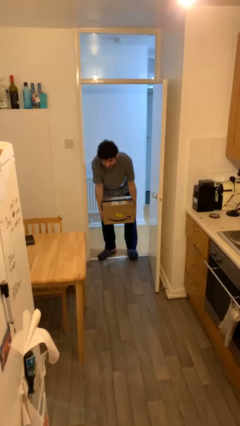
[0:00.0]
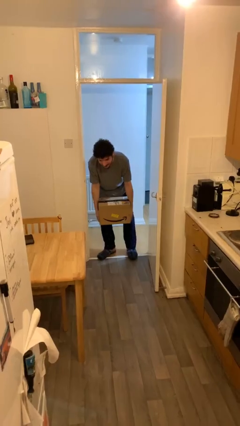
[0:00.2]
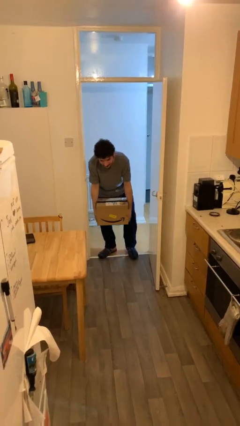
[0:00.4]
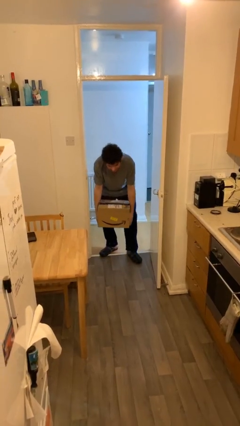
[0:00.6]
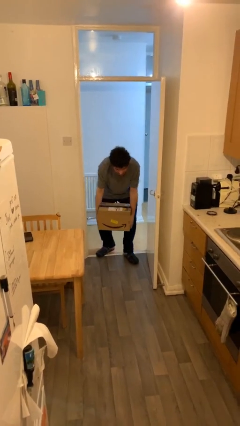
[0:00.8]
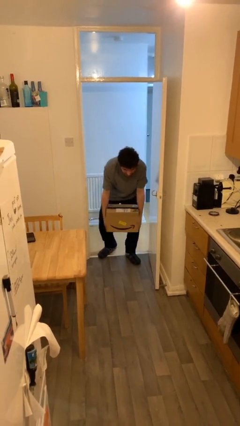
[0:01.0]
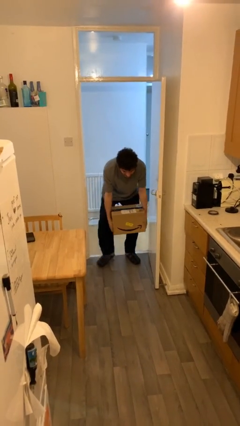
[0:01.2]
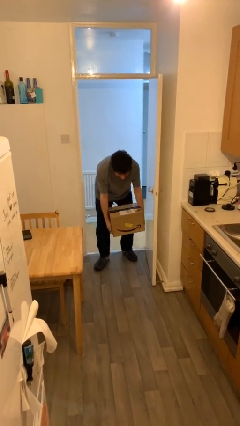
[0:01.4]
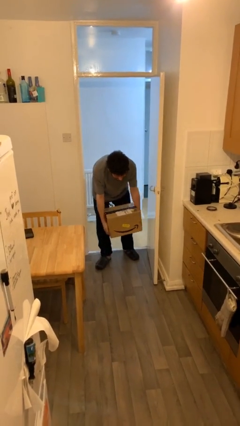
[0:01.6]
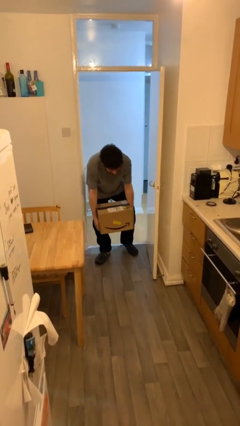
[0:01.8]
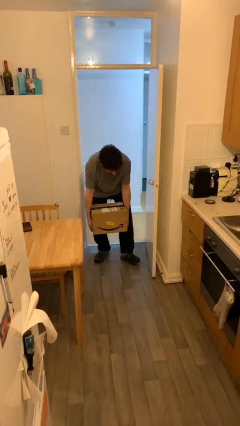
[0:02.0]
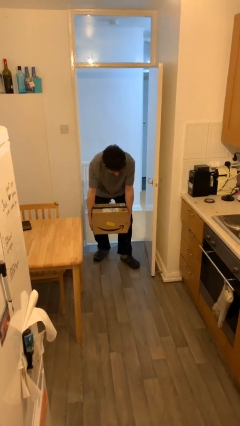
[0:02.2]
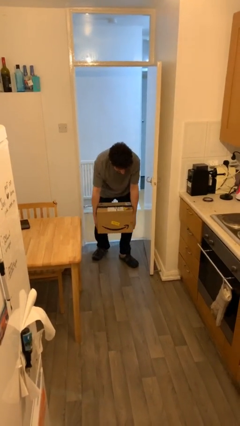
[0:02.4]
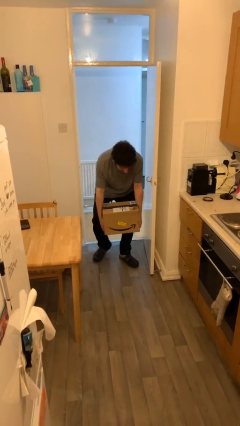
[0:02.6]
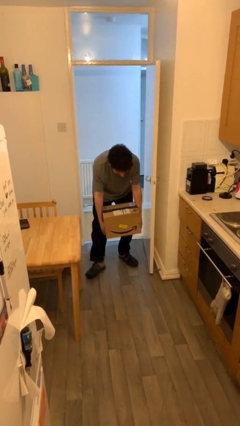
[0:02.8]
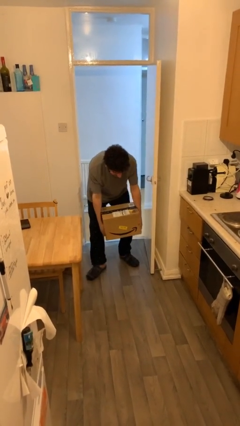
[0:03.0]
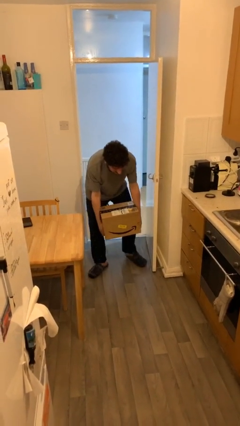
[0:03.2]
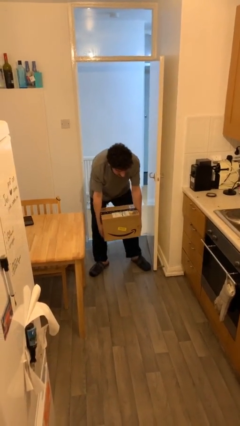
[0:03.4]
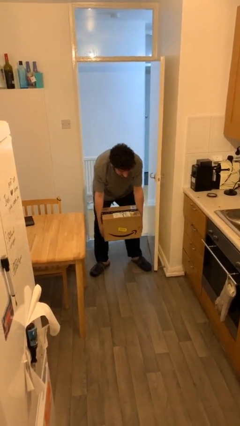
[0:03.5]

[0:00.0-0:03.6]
person carries heavy object

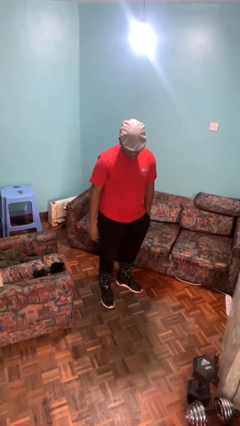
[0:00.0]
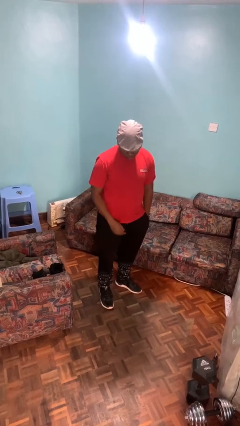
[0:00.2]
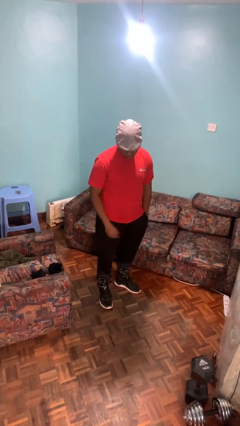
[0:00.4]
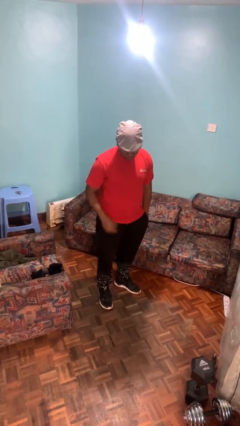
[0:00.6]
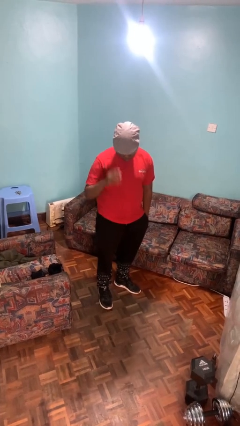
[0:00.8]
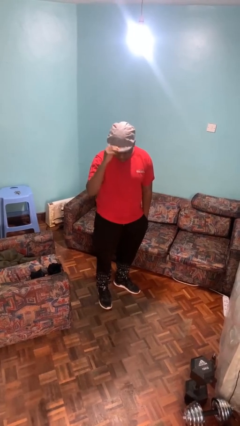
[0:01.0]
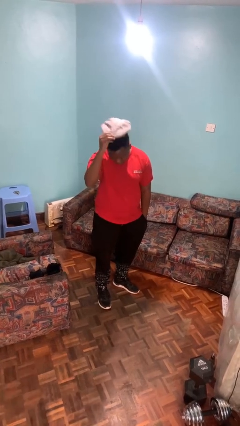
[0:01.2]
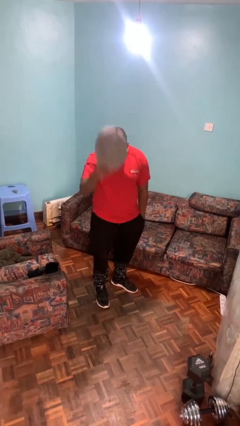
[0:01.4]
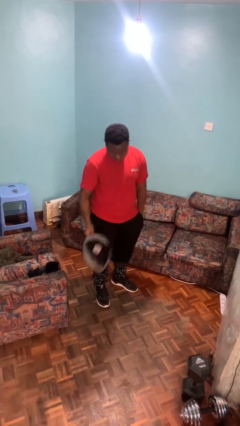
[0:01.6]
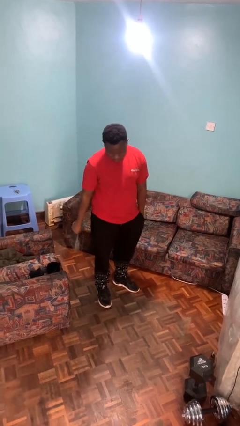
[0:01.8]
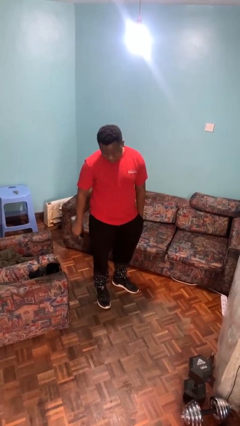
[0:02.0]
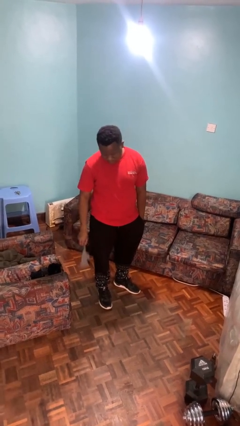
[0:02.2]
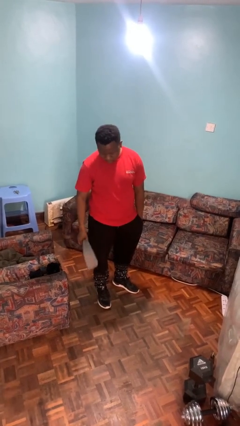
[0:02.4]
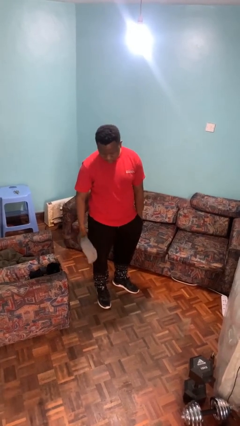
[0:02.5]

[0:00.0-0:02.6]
person takes off hat

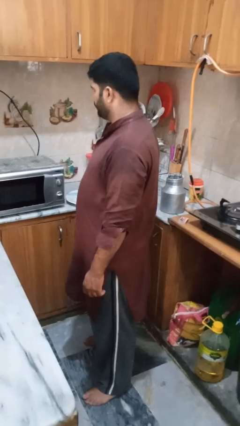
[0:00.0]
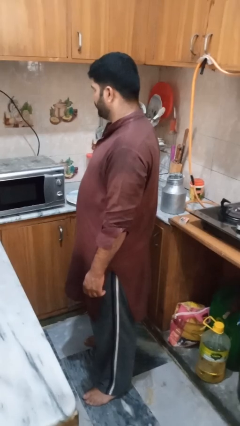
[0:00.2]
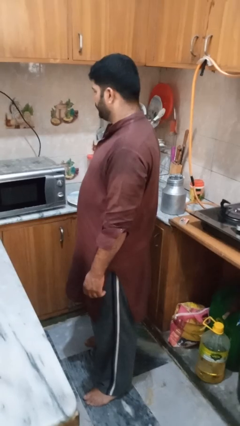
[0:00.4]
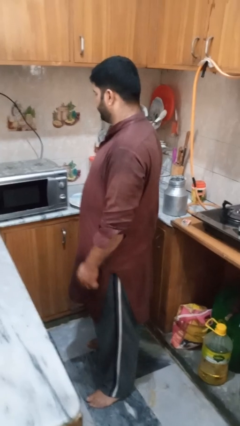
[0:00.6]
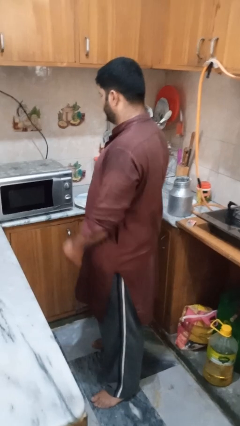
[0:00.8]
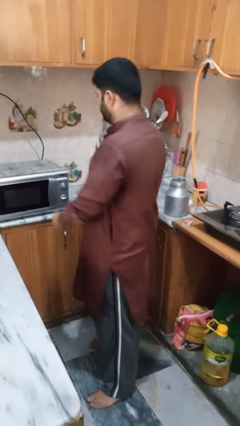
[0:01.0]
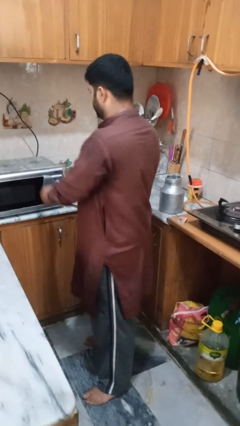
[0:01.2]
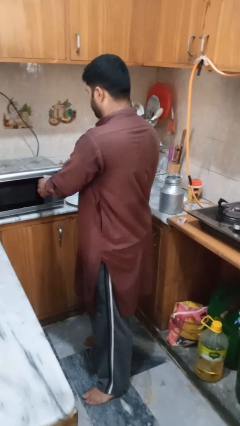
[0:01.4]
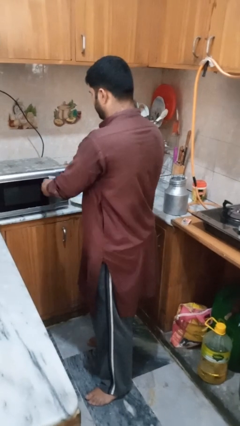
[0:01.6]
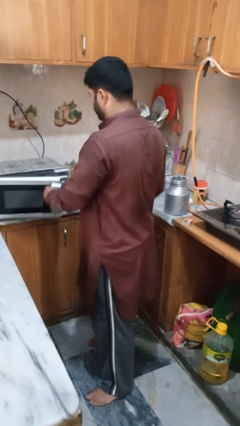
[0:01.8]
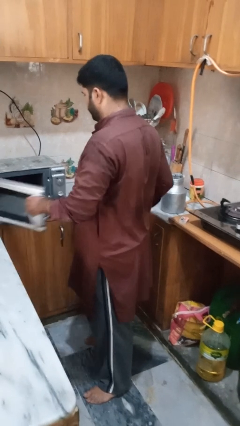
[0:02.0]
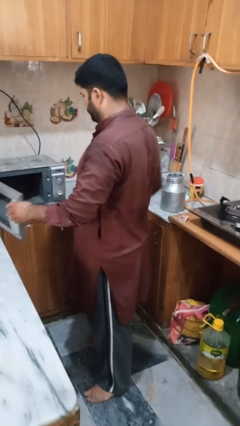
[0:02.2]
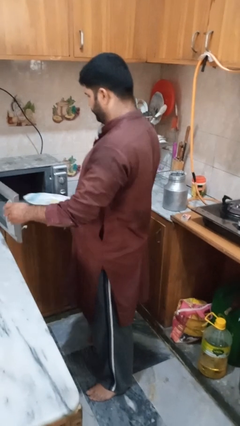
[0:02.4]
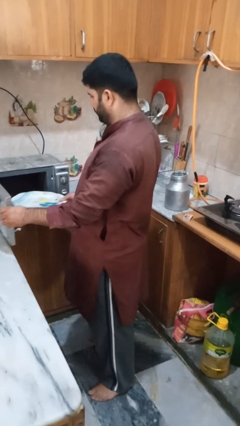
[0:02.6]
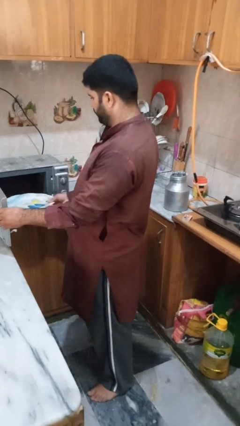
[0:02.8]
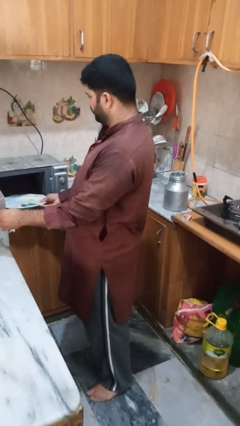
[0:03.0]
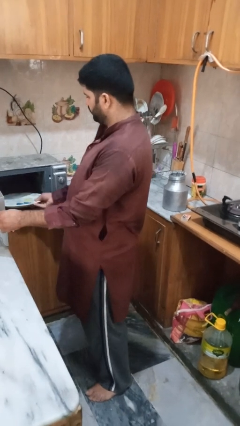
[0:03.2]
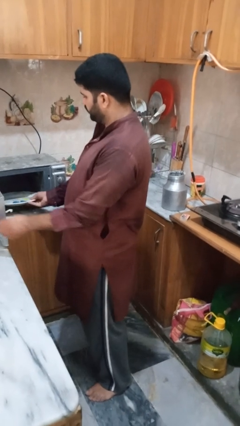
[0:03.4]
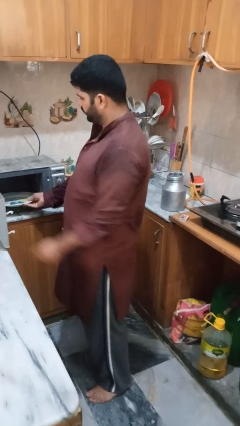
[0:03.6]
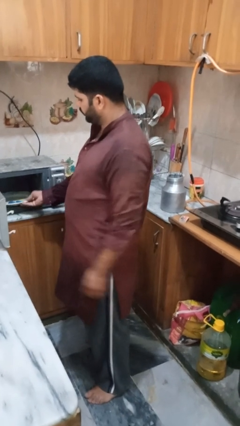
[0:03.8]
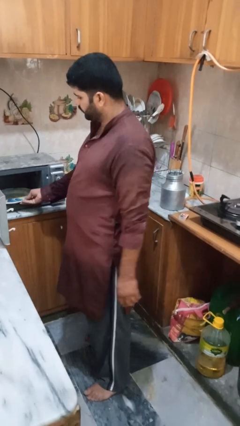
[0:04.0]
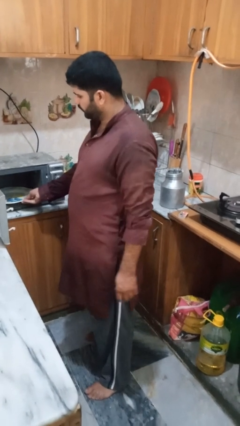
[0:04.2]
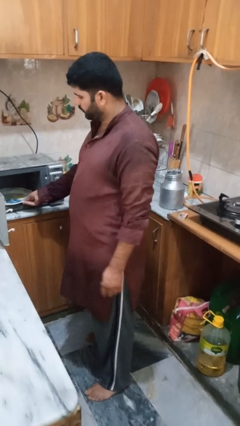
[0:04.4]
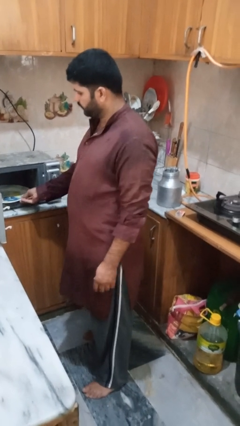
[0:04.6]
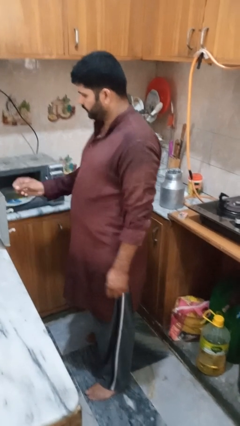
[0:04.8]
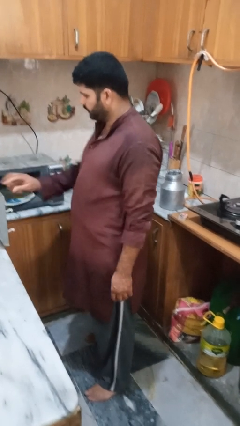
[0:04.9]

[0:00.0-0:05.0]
person puts object into oven

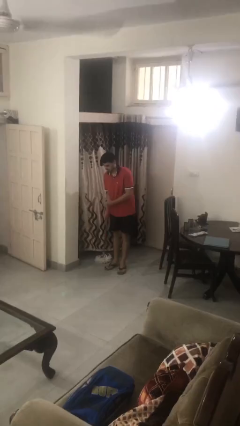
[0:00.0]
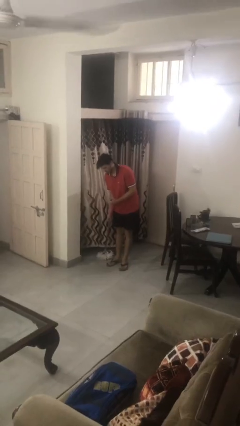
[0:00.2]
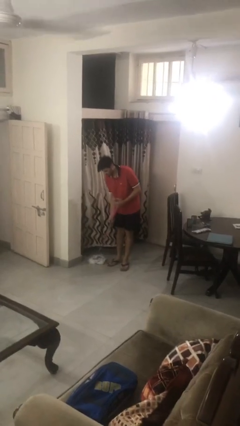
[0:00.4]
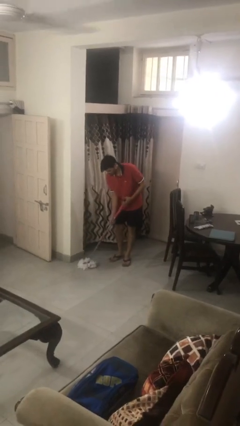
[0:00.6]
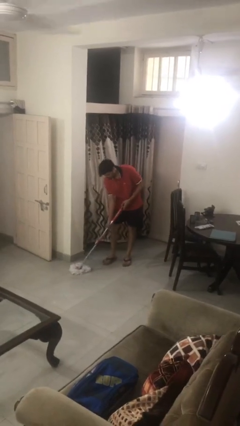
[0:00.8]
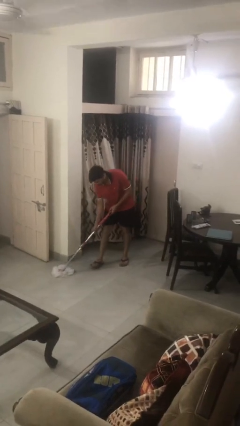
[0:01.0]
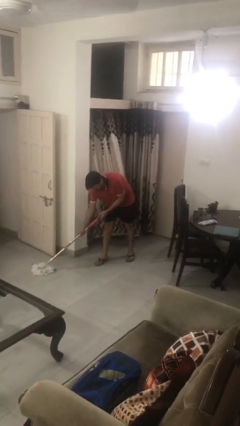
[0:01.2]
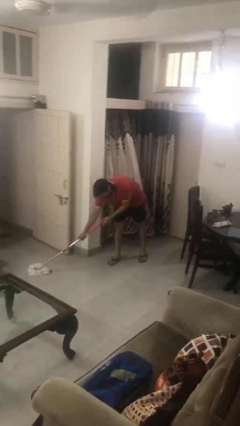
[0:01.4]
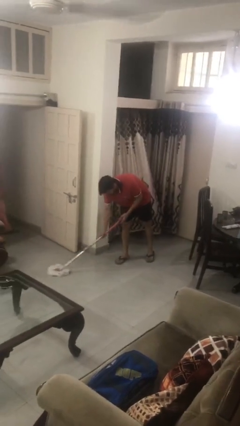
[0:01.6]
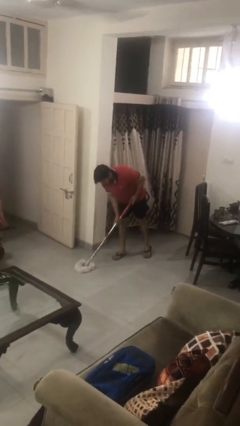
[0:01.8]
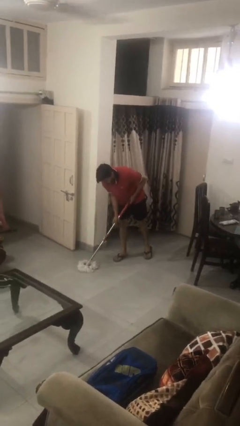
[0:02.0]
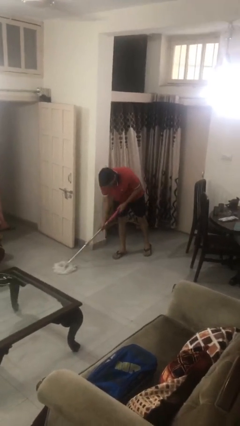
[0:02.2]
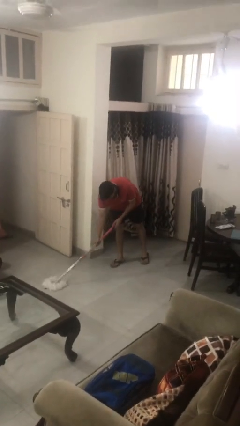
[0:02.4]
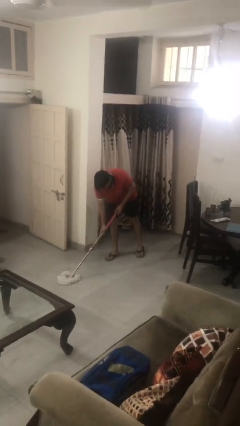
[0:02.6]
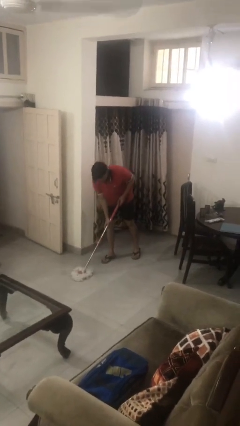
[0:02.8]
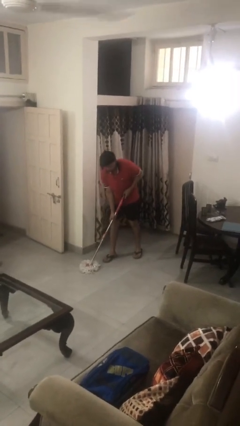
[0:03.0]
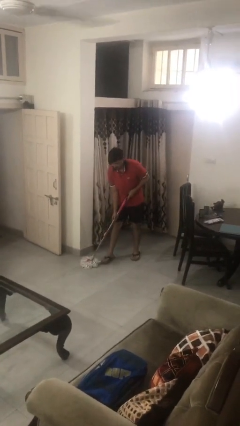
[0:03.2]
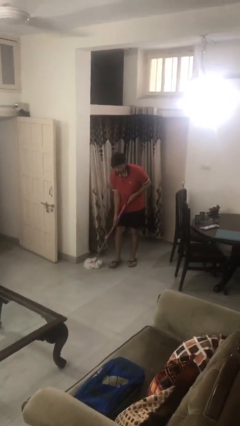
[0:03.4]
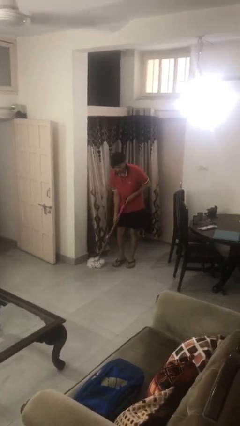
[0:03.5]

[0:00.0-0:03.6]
person mops

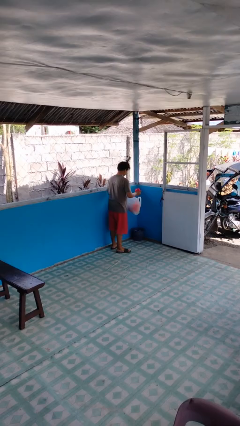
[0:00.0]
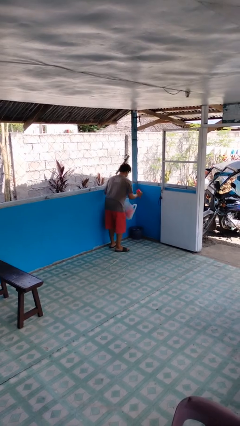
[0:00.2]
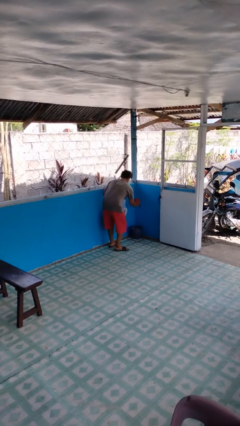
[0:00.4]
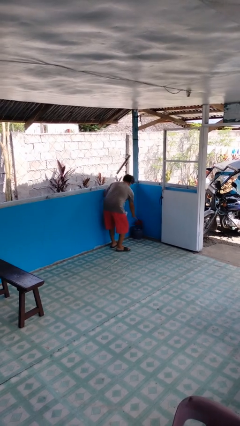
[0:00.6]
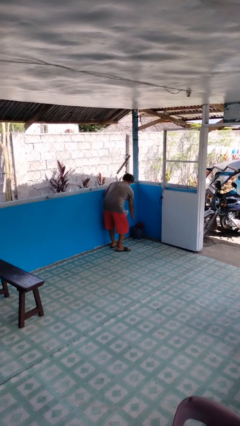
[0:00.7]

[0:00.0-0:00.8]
person discards trash

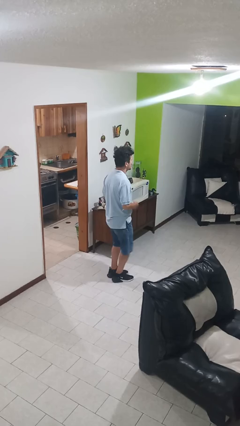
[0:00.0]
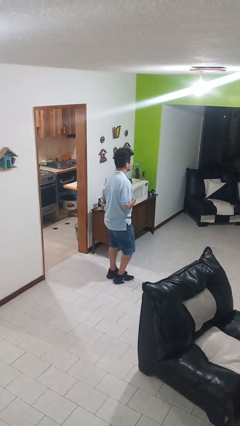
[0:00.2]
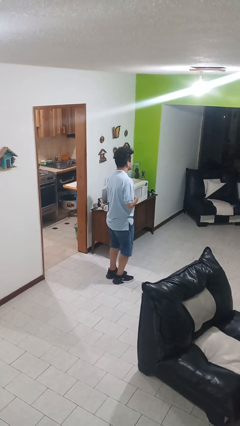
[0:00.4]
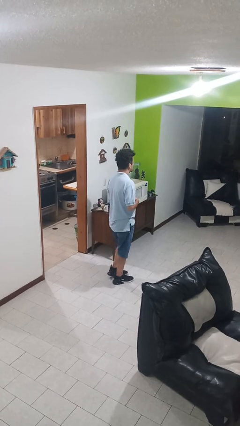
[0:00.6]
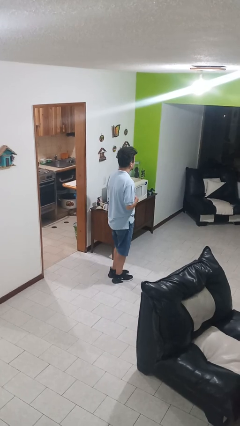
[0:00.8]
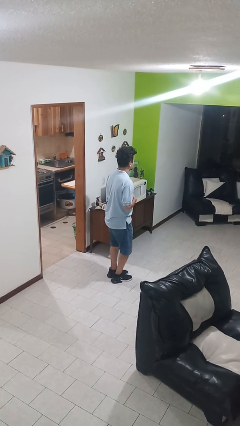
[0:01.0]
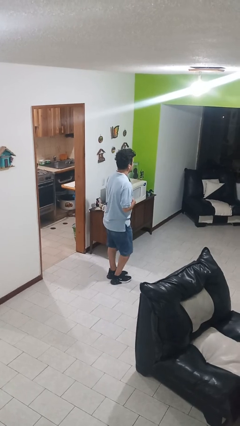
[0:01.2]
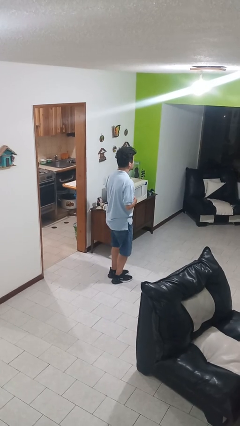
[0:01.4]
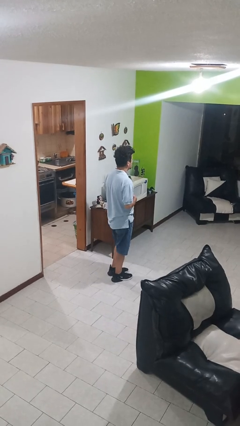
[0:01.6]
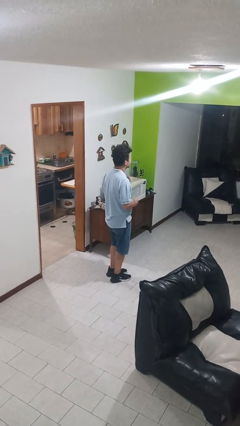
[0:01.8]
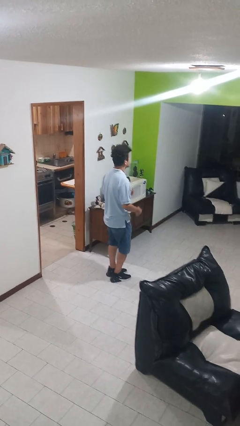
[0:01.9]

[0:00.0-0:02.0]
person dances in place
